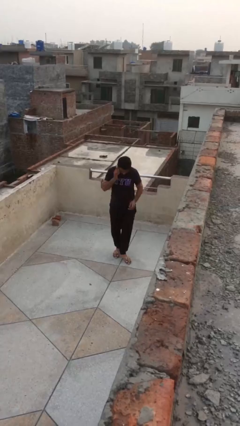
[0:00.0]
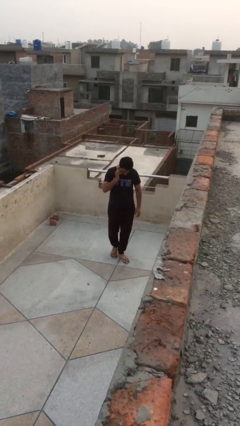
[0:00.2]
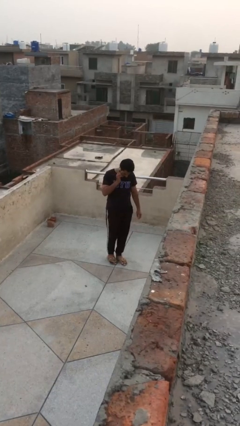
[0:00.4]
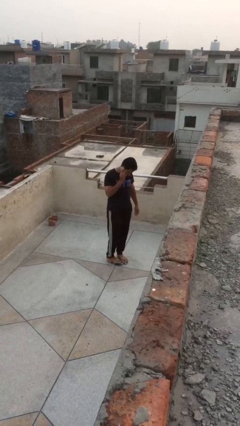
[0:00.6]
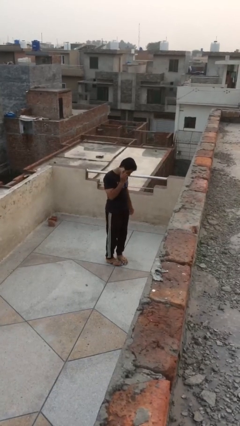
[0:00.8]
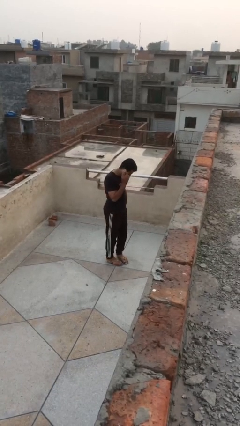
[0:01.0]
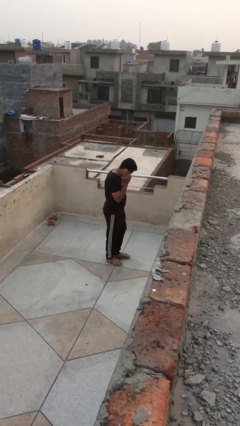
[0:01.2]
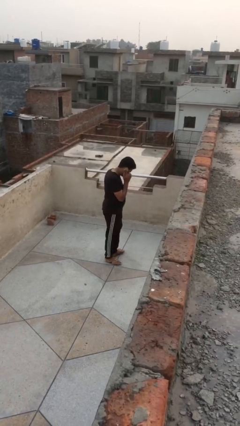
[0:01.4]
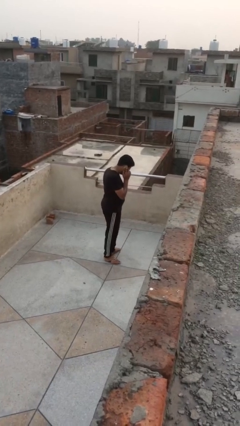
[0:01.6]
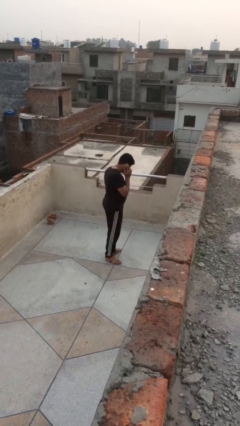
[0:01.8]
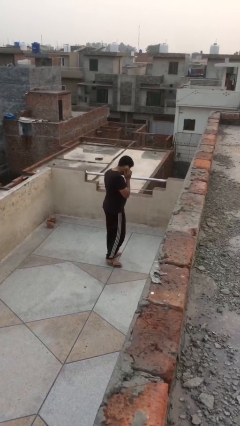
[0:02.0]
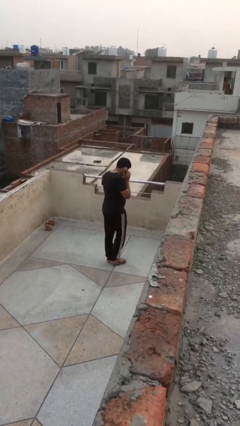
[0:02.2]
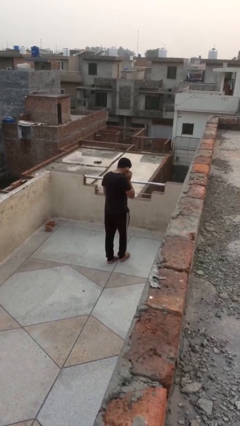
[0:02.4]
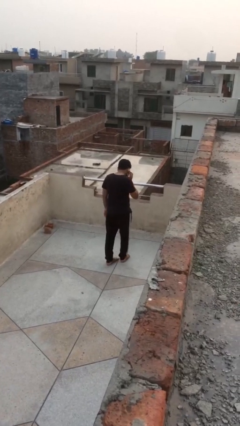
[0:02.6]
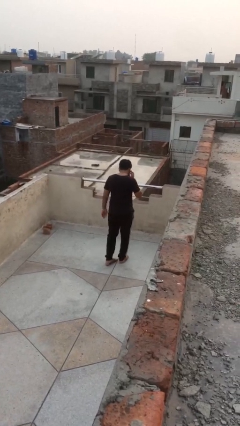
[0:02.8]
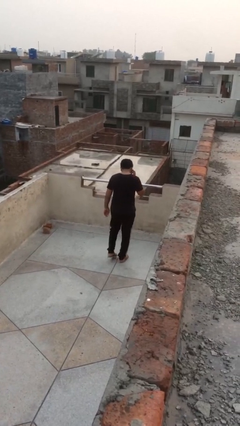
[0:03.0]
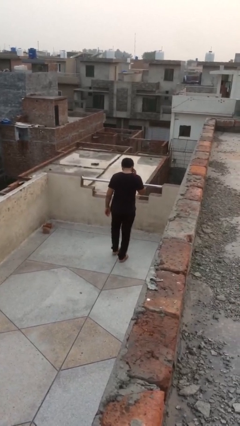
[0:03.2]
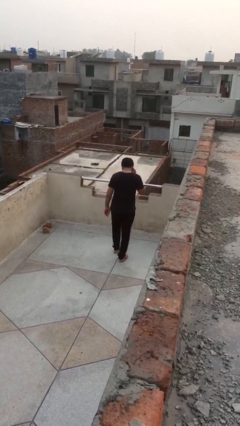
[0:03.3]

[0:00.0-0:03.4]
person talks on phone

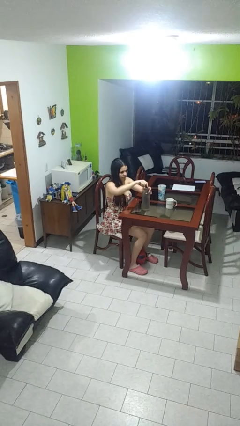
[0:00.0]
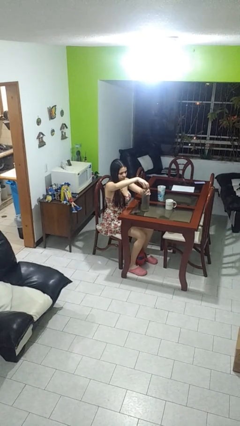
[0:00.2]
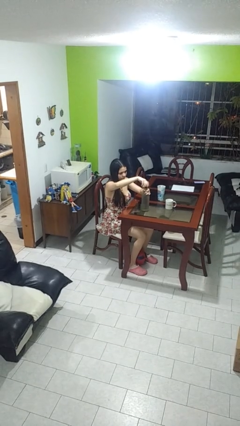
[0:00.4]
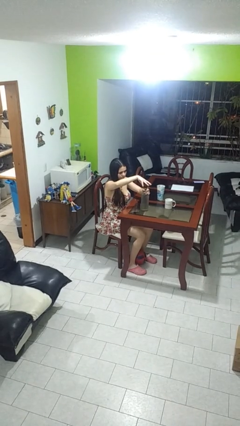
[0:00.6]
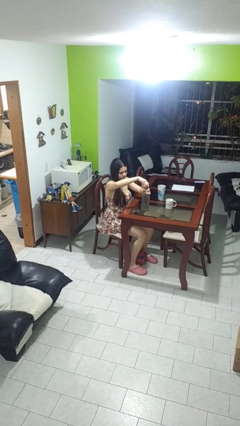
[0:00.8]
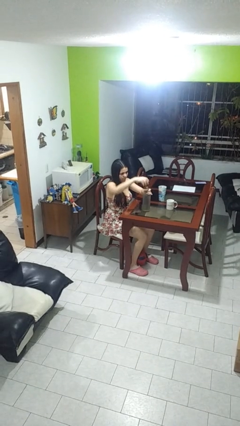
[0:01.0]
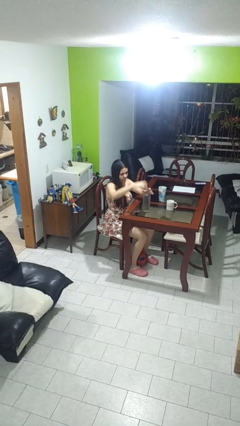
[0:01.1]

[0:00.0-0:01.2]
person unscrews lid from bottle

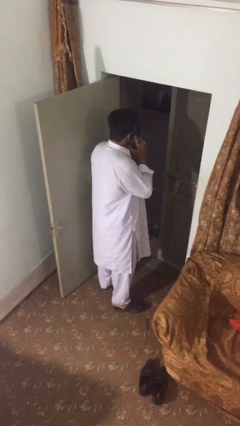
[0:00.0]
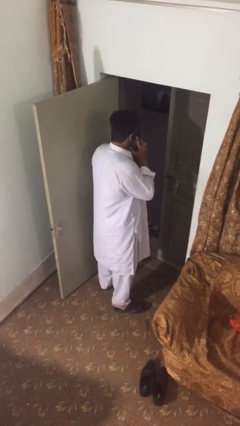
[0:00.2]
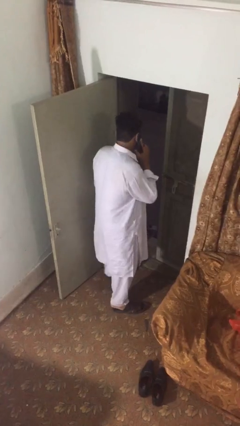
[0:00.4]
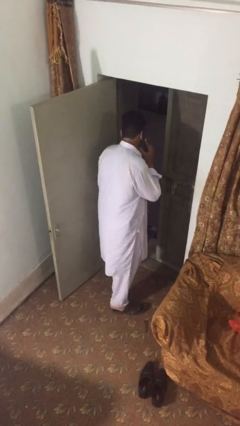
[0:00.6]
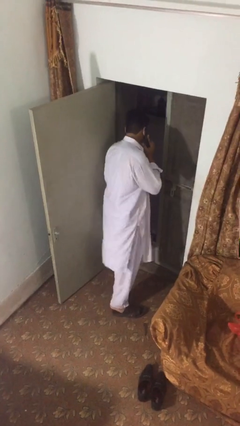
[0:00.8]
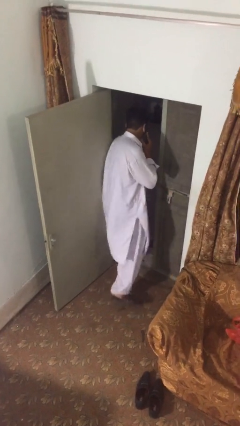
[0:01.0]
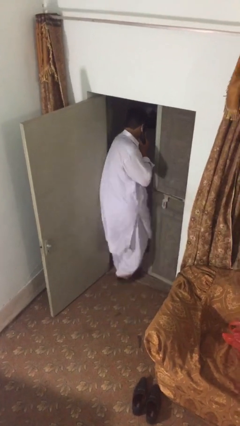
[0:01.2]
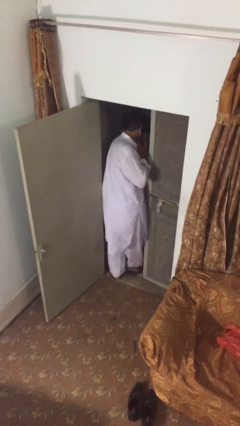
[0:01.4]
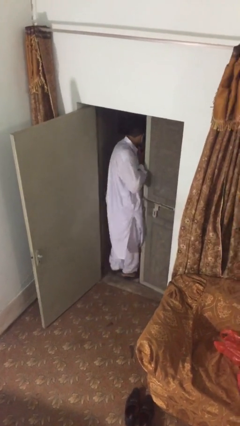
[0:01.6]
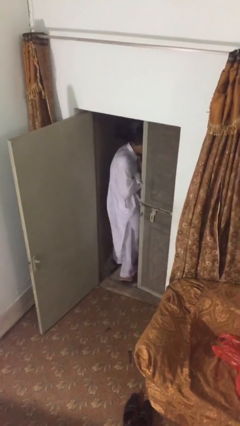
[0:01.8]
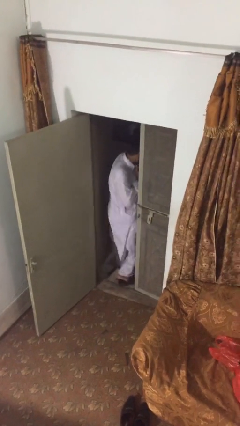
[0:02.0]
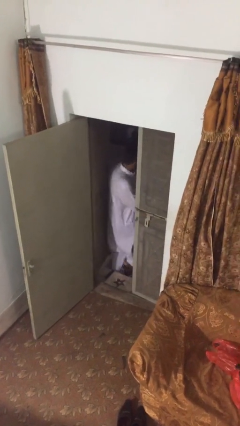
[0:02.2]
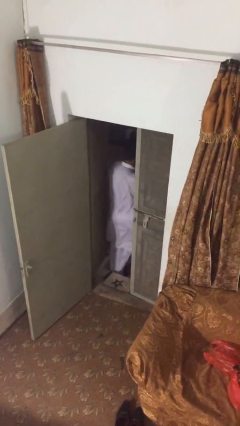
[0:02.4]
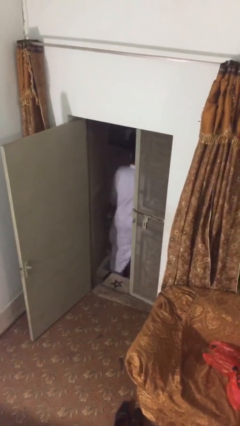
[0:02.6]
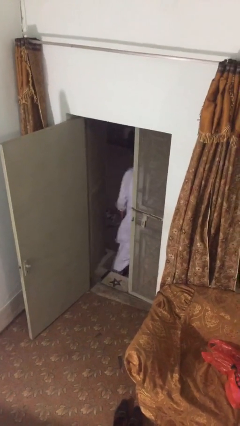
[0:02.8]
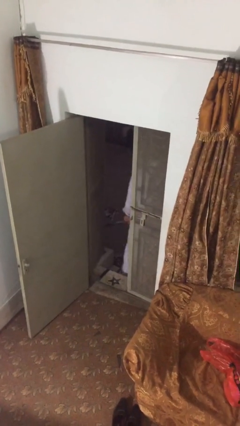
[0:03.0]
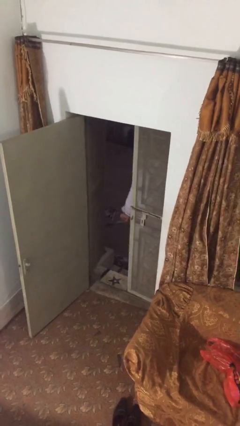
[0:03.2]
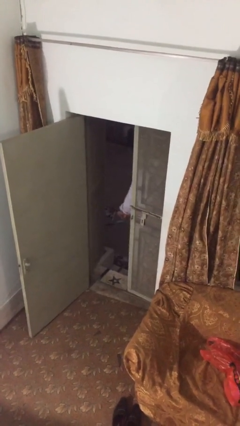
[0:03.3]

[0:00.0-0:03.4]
person exits scene through structure

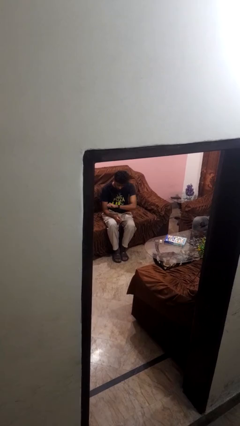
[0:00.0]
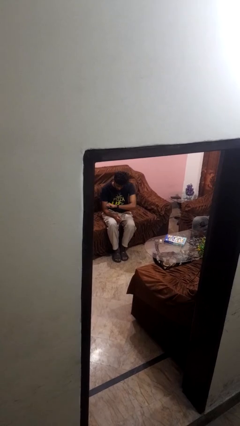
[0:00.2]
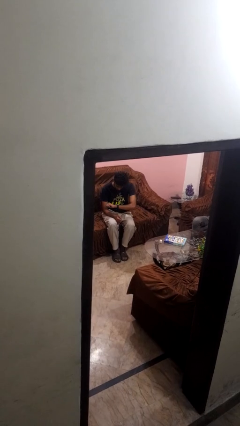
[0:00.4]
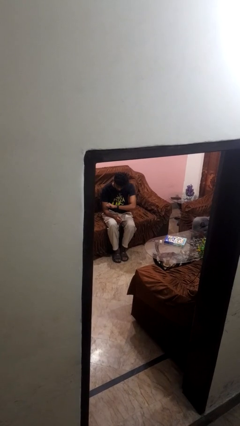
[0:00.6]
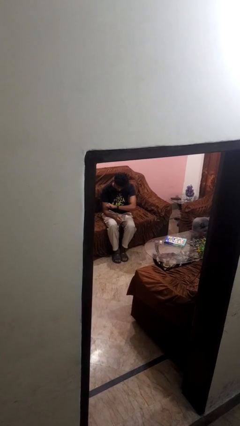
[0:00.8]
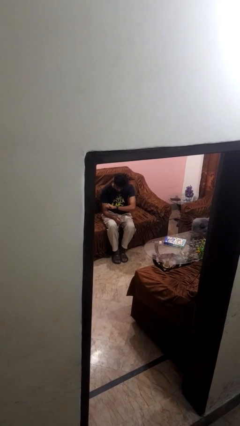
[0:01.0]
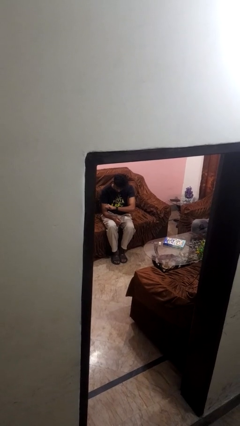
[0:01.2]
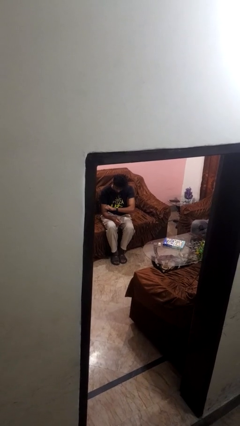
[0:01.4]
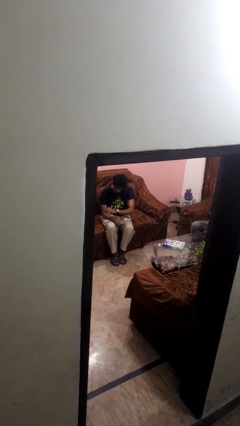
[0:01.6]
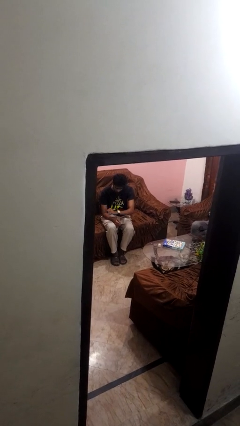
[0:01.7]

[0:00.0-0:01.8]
person looks at wristwatch

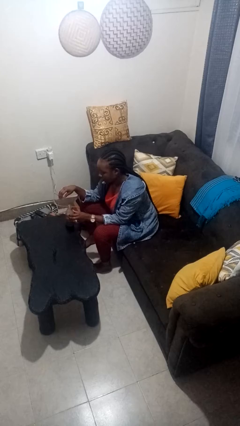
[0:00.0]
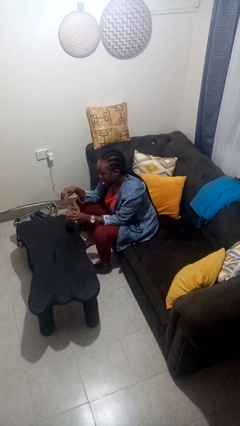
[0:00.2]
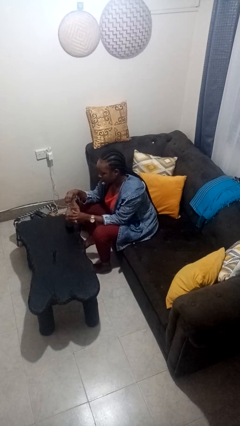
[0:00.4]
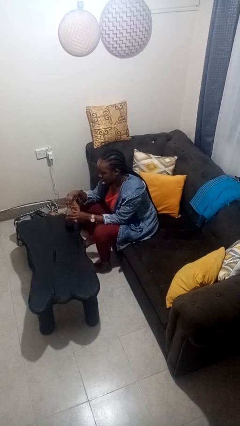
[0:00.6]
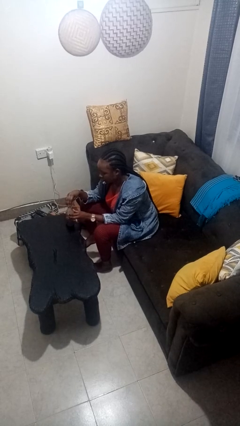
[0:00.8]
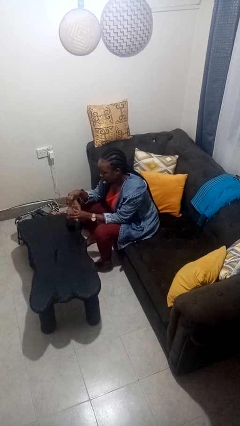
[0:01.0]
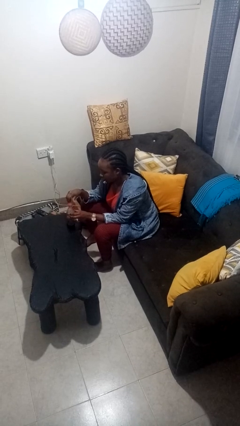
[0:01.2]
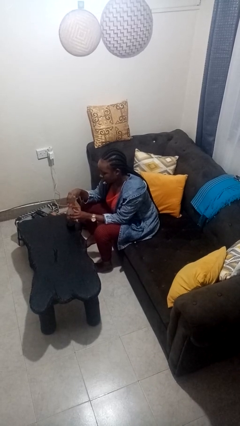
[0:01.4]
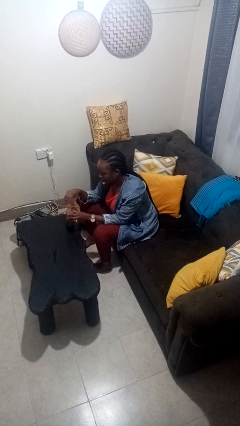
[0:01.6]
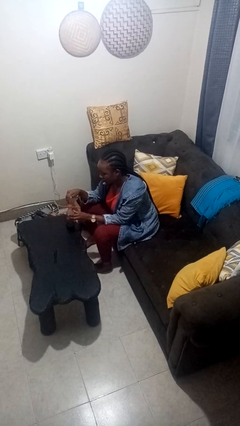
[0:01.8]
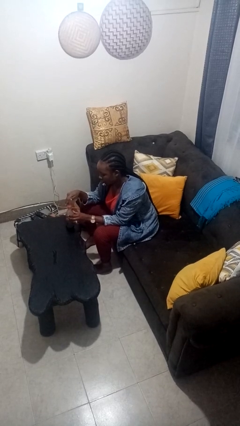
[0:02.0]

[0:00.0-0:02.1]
person screws lid to bottle

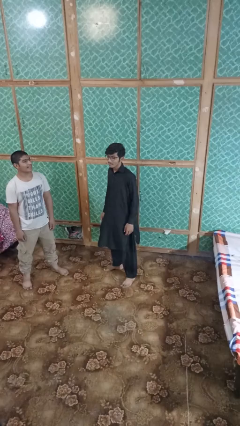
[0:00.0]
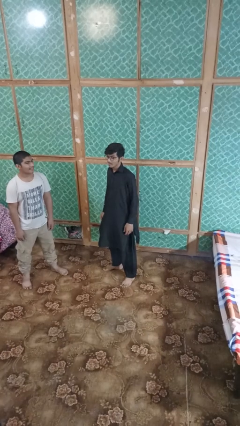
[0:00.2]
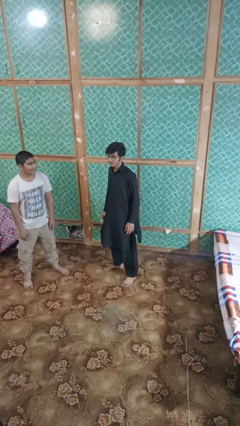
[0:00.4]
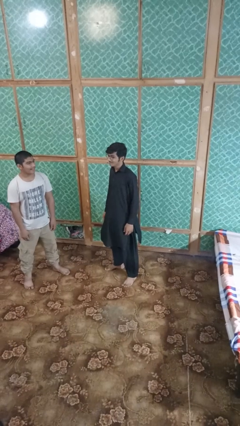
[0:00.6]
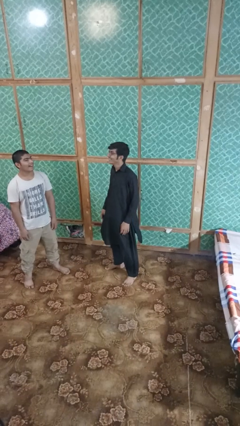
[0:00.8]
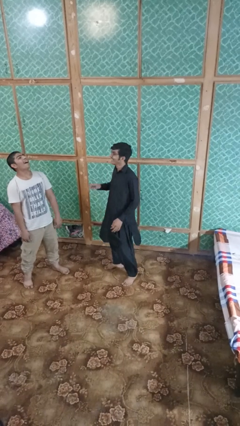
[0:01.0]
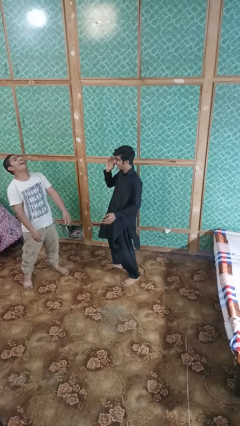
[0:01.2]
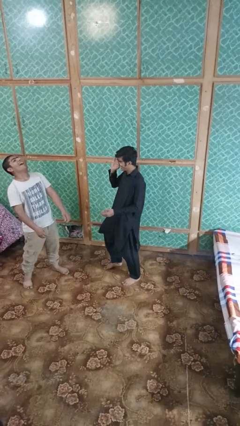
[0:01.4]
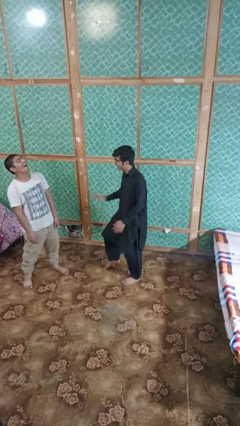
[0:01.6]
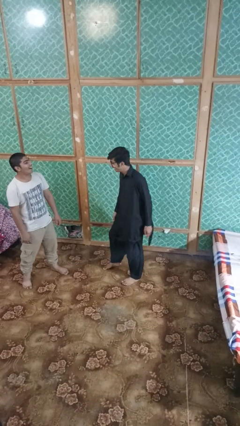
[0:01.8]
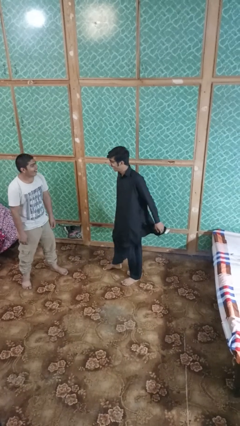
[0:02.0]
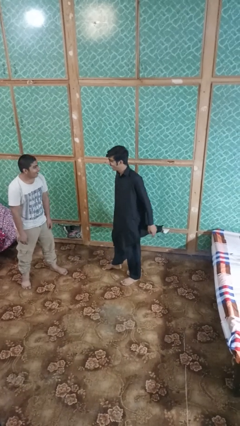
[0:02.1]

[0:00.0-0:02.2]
person laughs with person

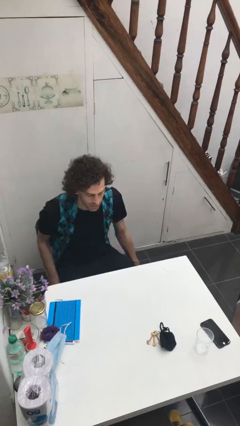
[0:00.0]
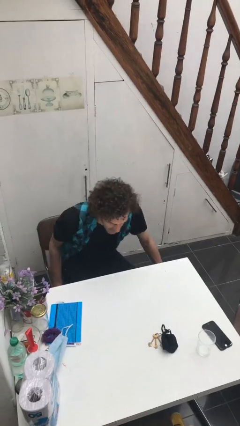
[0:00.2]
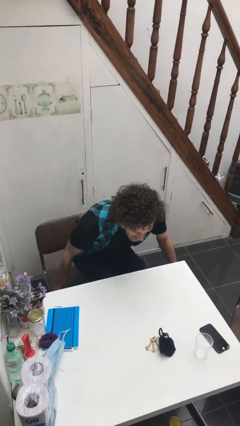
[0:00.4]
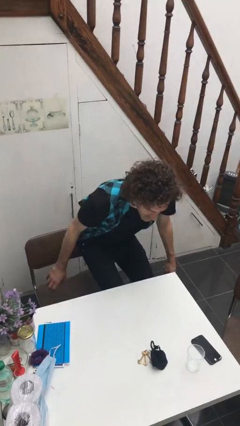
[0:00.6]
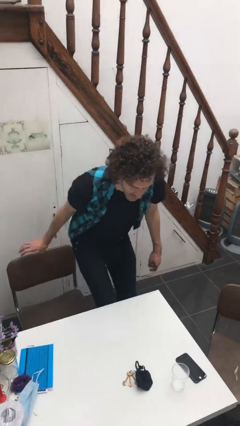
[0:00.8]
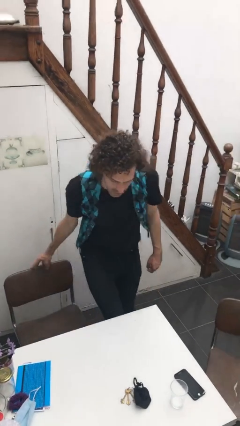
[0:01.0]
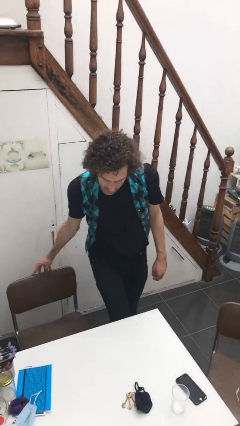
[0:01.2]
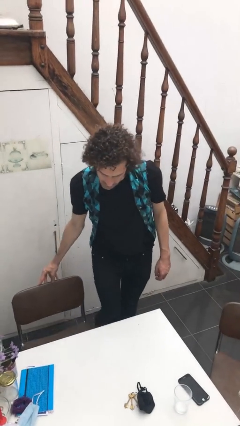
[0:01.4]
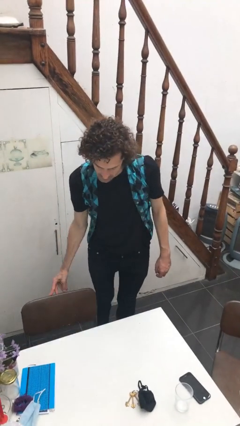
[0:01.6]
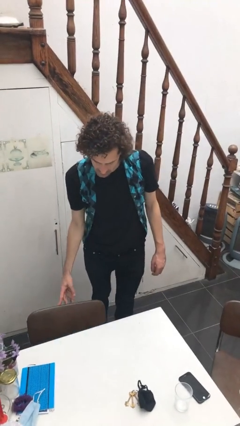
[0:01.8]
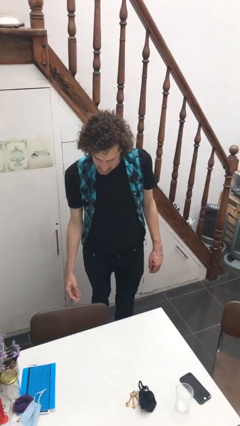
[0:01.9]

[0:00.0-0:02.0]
person stands up

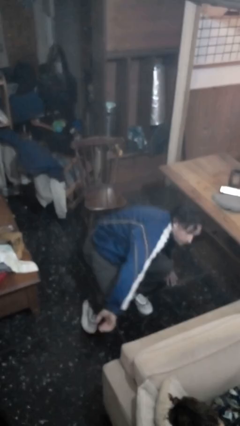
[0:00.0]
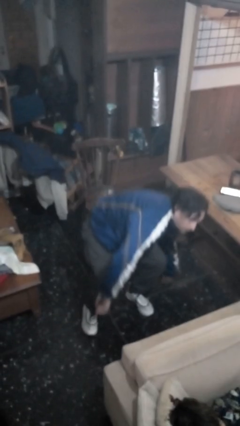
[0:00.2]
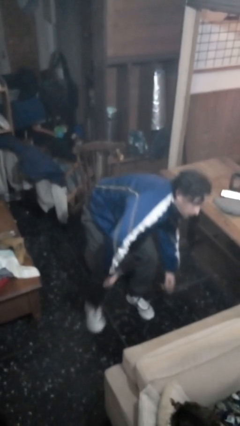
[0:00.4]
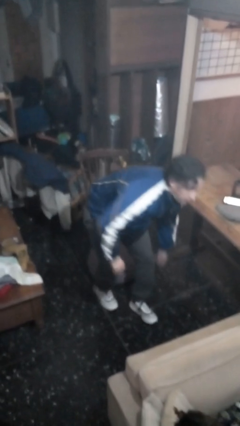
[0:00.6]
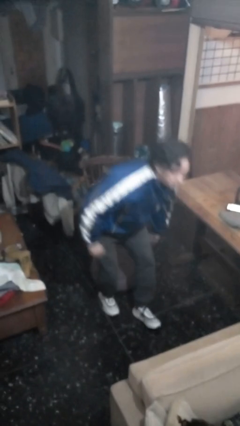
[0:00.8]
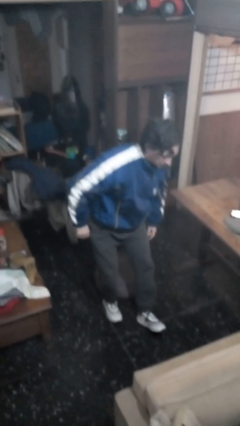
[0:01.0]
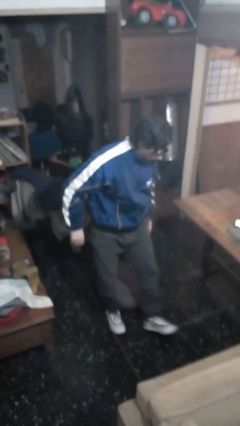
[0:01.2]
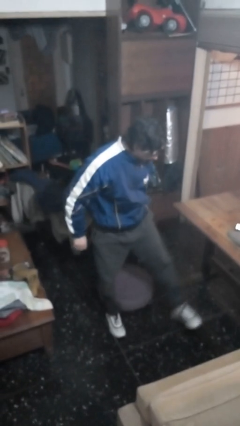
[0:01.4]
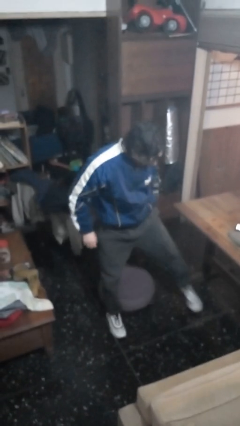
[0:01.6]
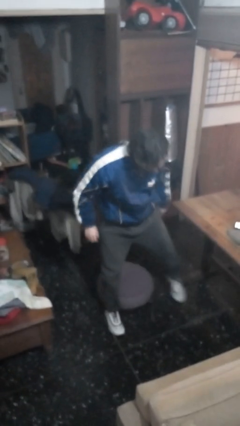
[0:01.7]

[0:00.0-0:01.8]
person stands up from floor
